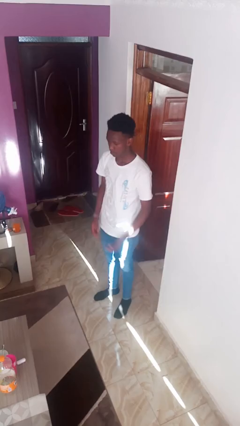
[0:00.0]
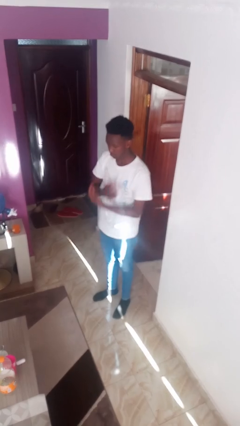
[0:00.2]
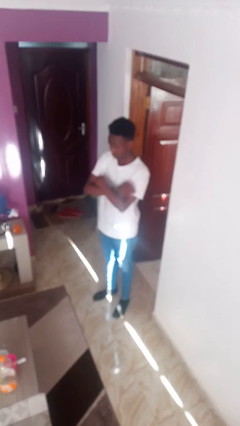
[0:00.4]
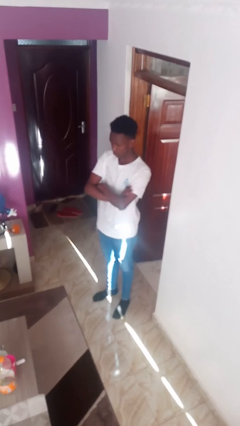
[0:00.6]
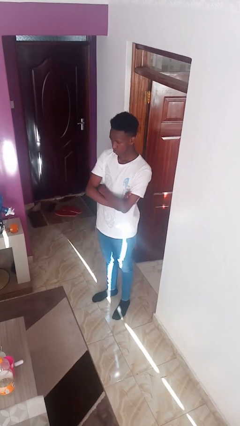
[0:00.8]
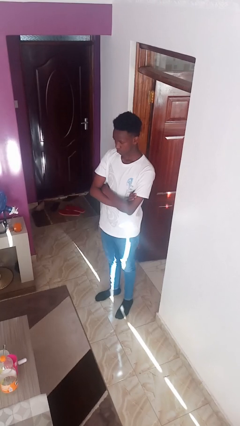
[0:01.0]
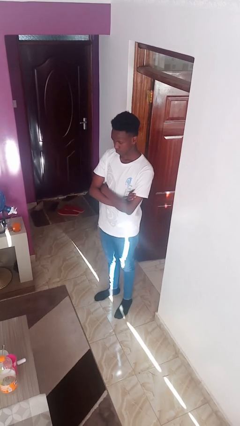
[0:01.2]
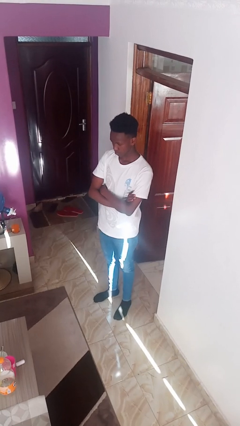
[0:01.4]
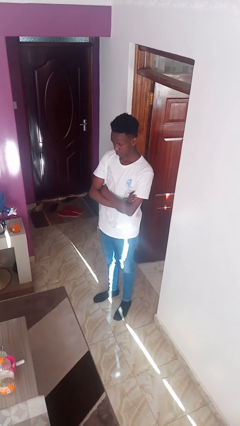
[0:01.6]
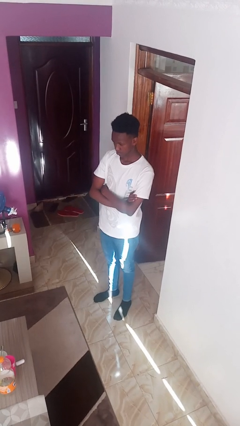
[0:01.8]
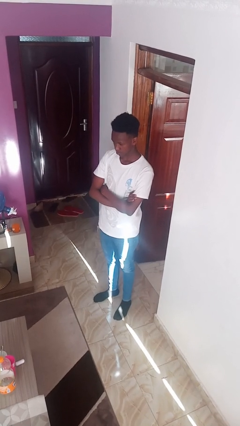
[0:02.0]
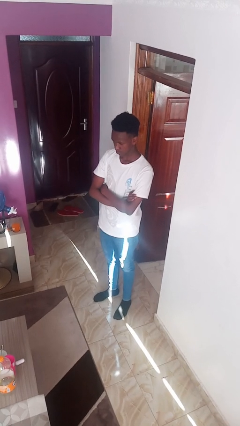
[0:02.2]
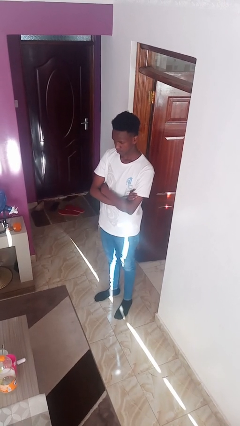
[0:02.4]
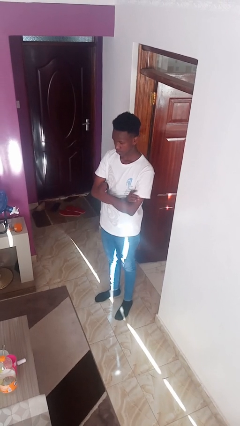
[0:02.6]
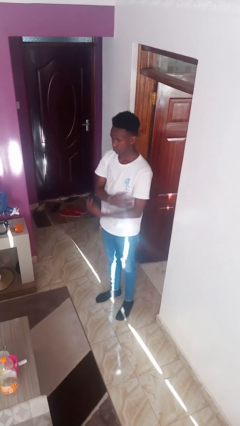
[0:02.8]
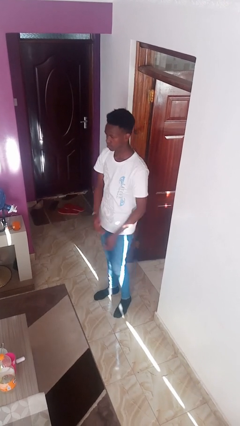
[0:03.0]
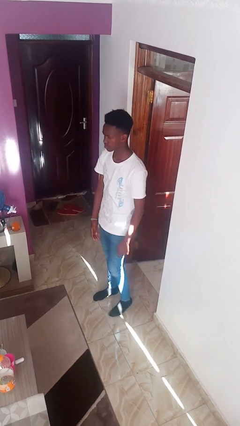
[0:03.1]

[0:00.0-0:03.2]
person crosses arms

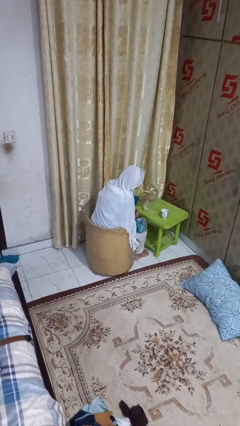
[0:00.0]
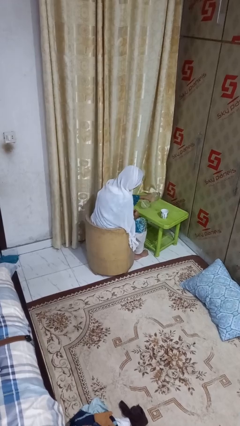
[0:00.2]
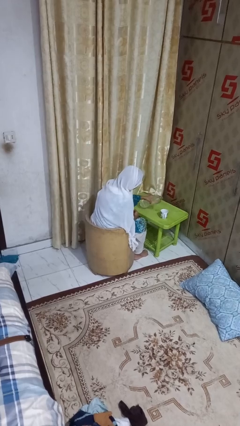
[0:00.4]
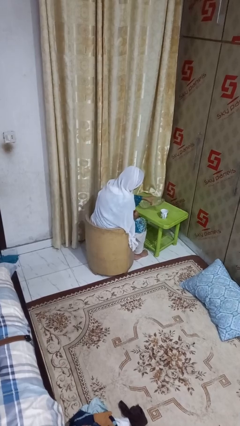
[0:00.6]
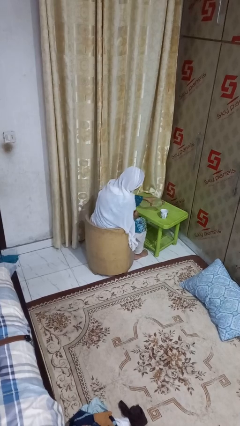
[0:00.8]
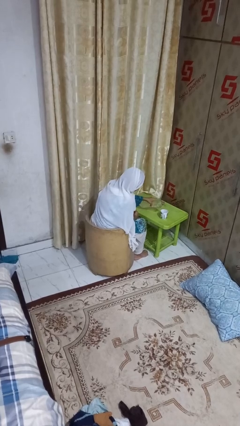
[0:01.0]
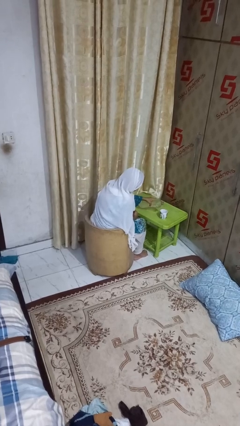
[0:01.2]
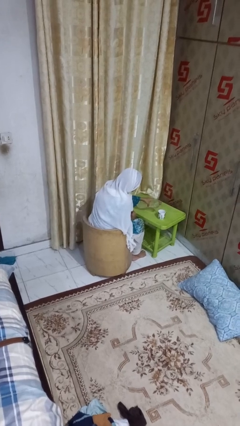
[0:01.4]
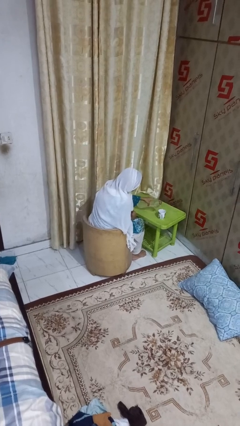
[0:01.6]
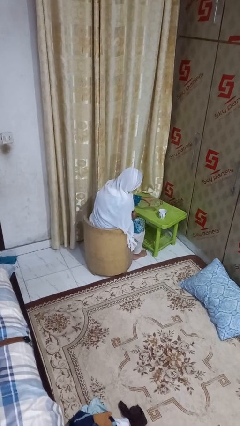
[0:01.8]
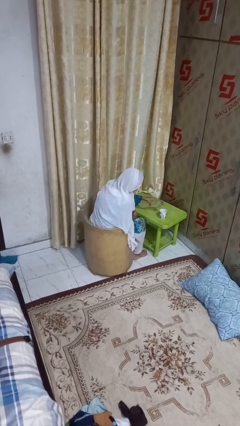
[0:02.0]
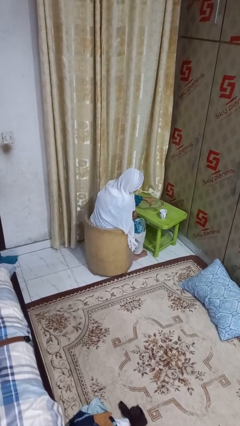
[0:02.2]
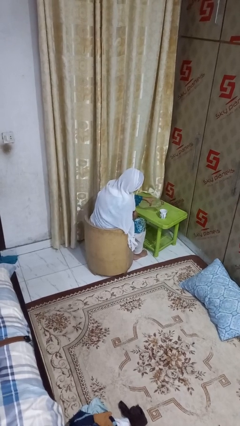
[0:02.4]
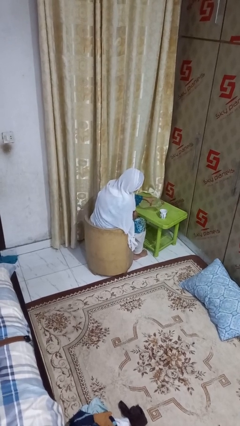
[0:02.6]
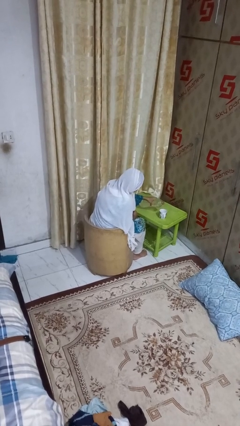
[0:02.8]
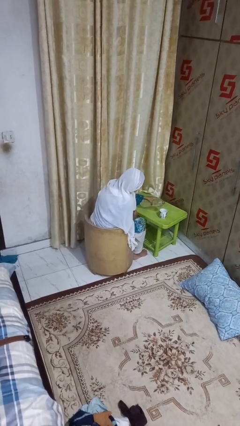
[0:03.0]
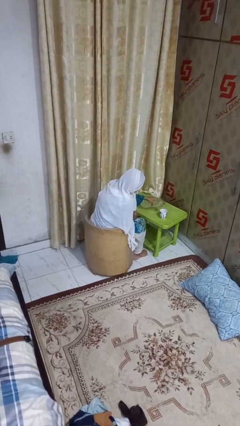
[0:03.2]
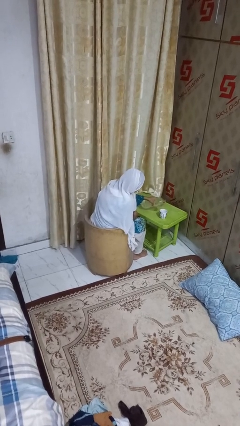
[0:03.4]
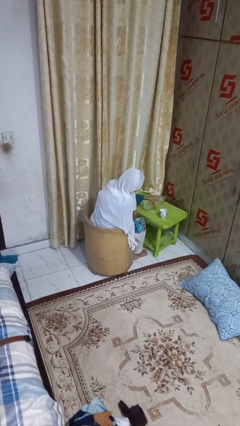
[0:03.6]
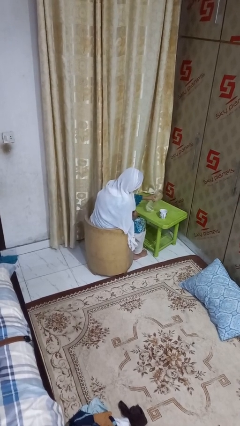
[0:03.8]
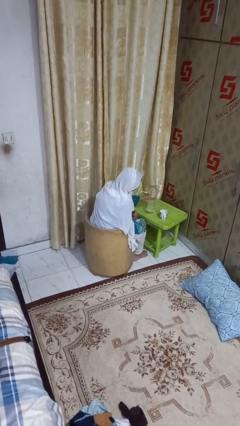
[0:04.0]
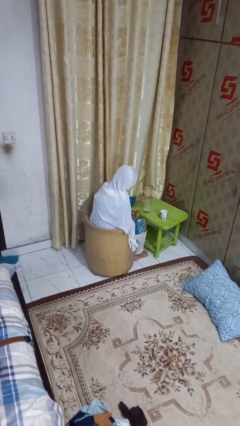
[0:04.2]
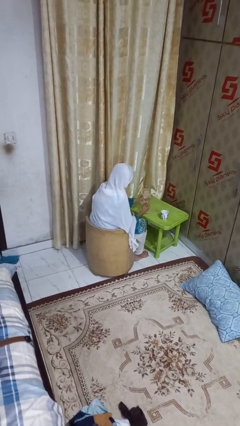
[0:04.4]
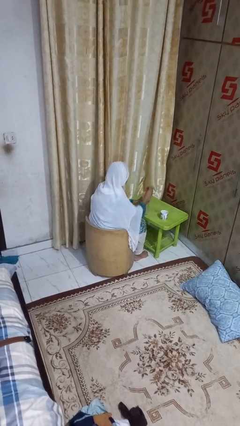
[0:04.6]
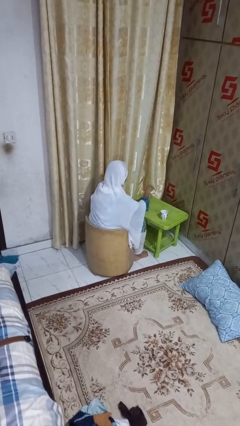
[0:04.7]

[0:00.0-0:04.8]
person pours liquid into cup

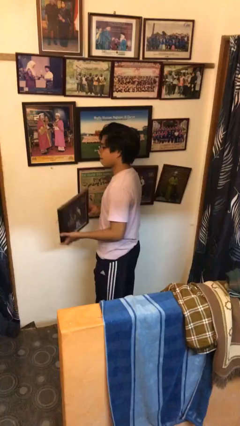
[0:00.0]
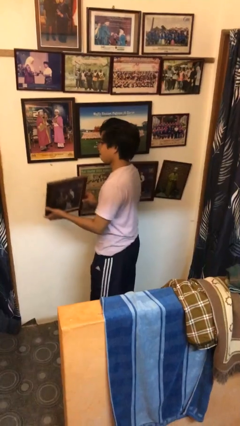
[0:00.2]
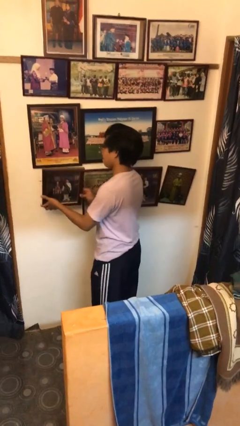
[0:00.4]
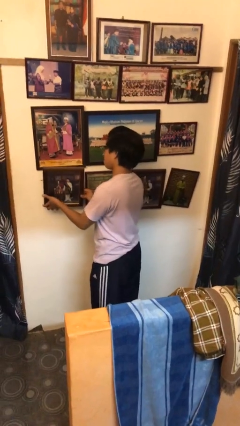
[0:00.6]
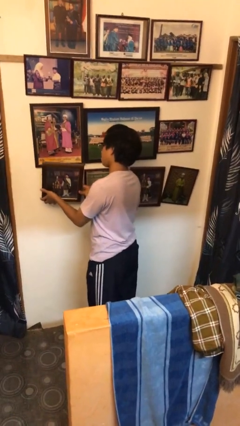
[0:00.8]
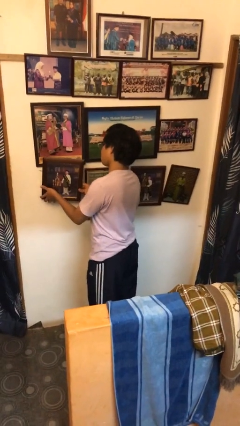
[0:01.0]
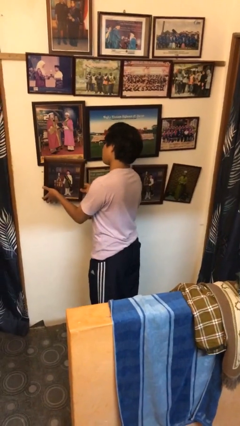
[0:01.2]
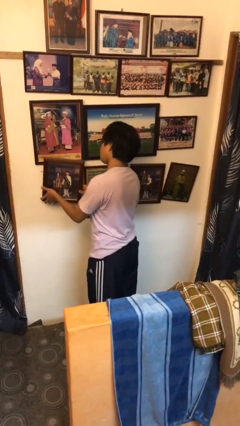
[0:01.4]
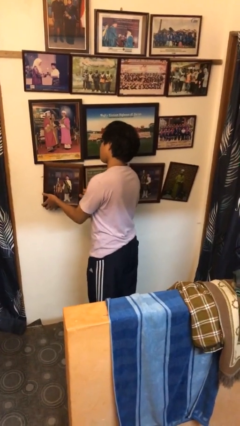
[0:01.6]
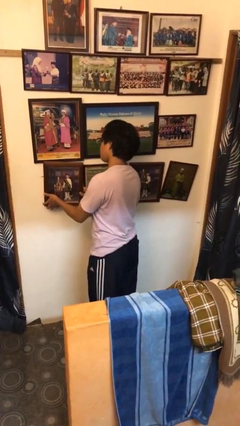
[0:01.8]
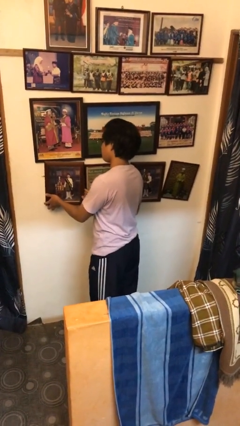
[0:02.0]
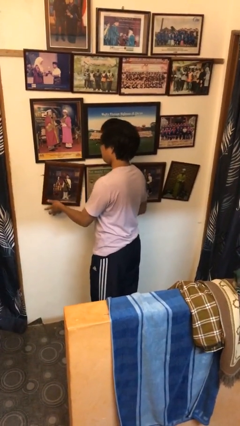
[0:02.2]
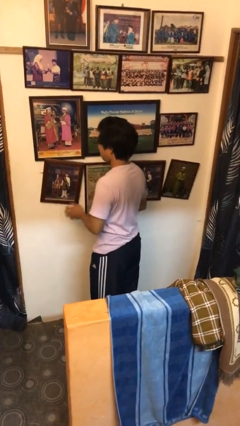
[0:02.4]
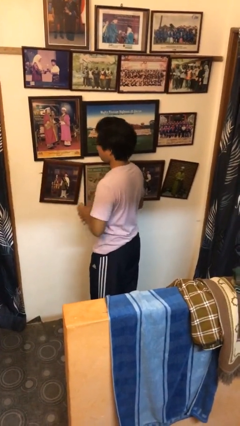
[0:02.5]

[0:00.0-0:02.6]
person puts up picture frame

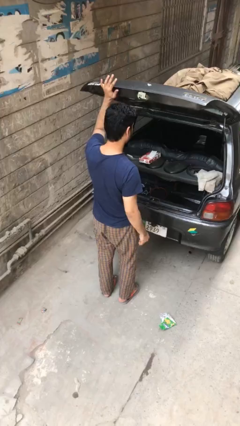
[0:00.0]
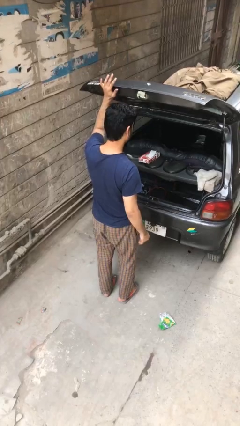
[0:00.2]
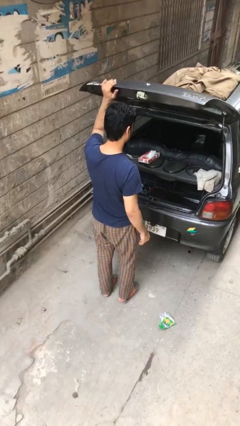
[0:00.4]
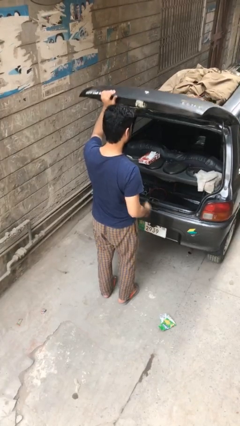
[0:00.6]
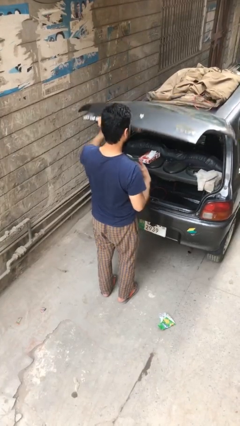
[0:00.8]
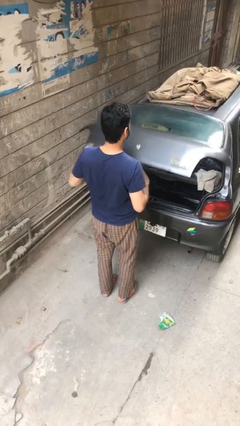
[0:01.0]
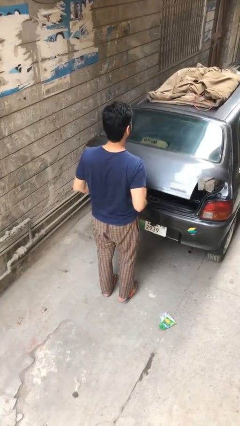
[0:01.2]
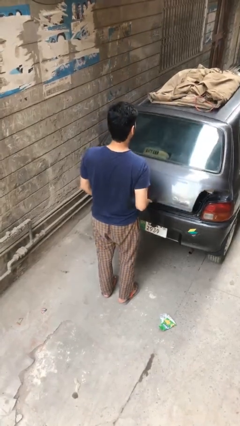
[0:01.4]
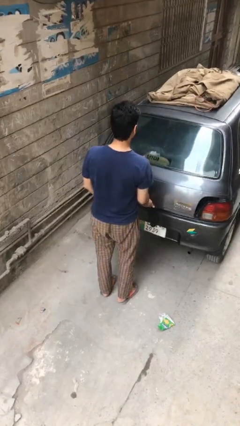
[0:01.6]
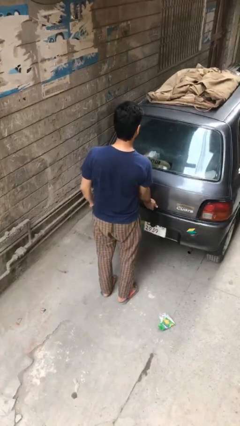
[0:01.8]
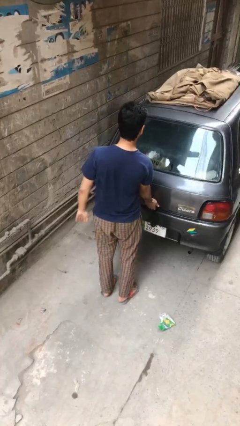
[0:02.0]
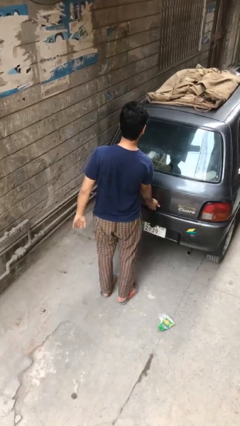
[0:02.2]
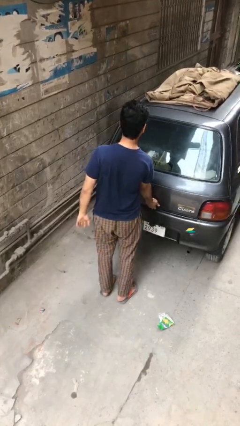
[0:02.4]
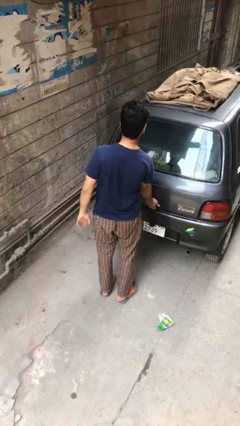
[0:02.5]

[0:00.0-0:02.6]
person closes car trunk

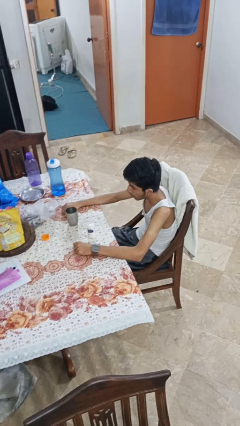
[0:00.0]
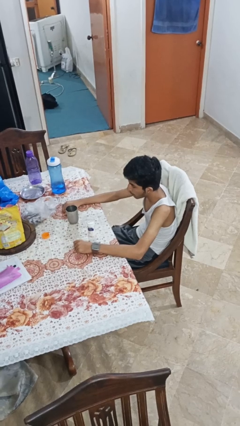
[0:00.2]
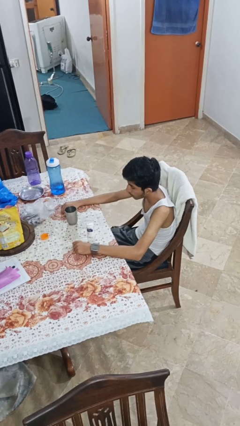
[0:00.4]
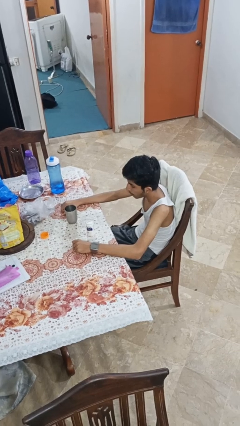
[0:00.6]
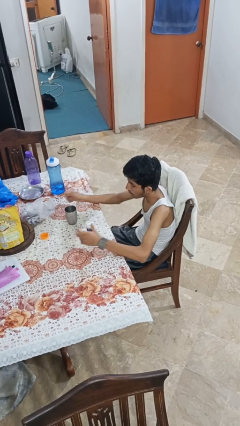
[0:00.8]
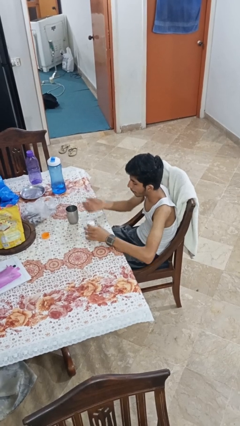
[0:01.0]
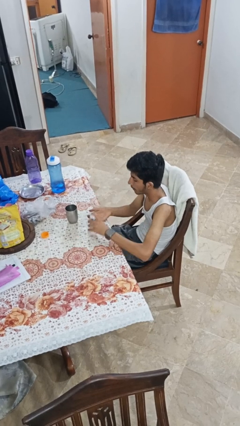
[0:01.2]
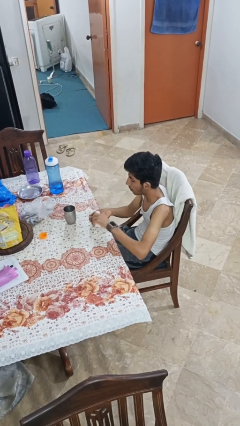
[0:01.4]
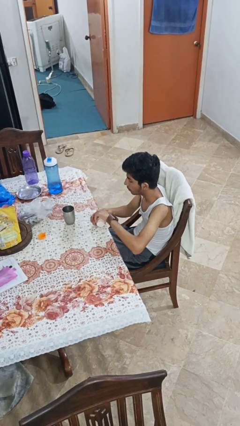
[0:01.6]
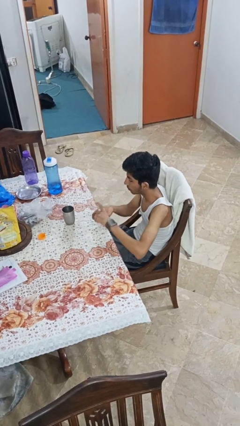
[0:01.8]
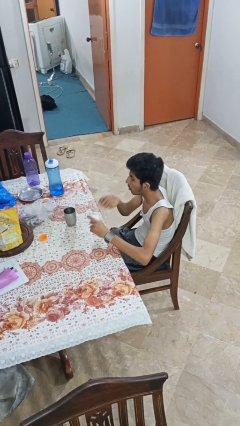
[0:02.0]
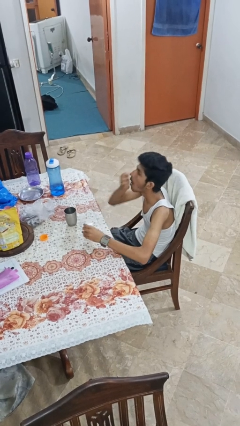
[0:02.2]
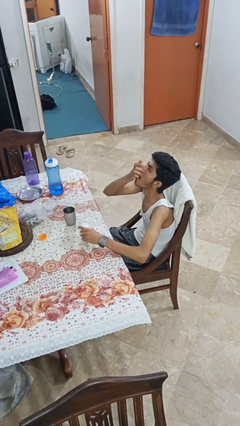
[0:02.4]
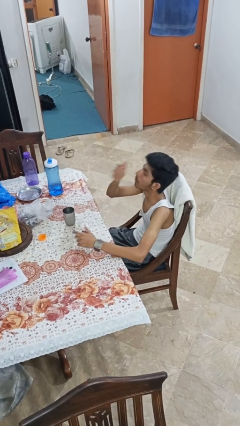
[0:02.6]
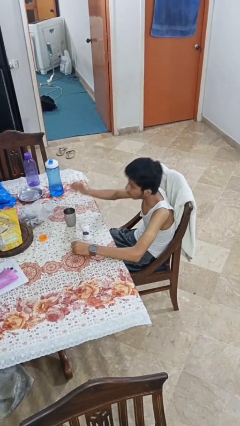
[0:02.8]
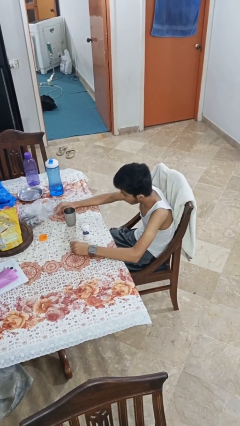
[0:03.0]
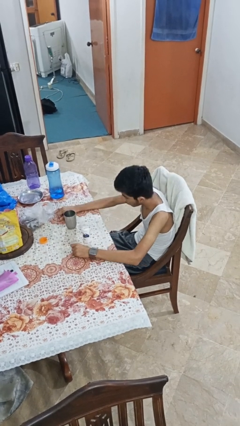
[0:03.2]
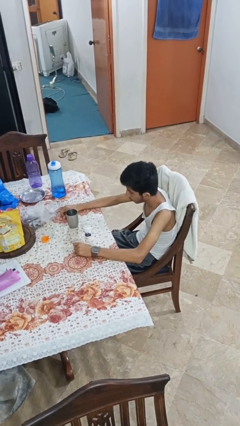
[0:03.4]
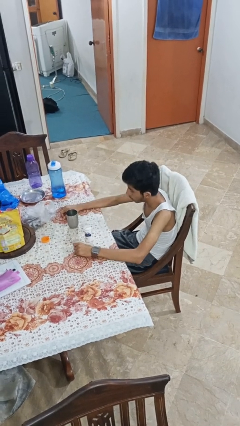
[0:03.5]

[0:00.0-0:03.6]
person takes medicine pills

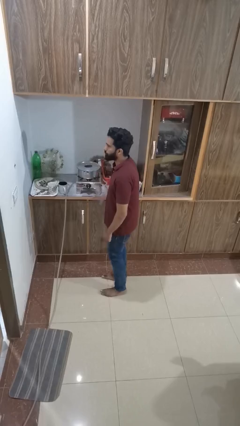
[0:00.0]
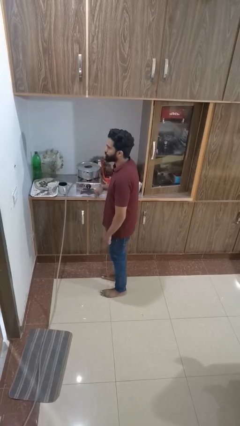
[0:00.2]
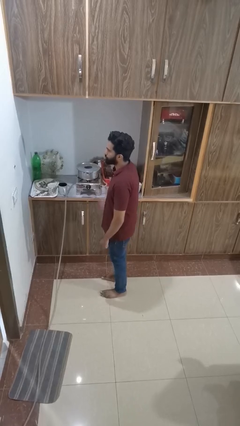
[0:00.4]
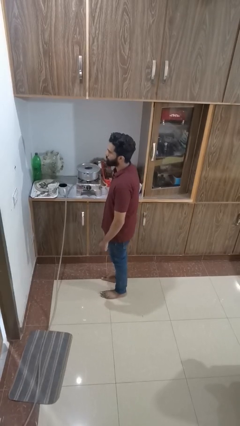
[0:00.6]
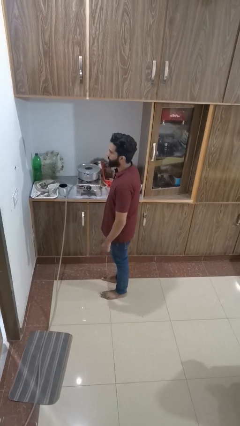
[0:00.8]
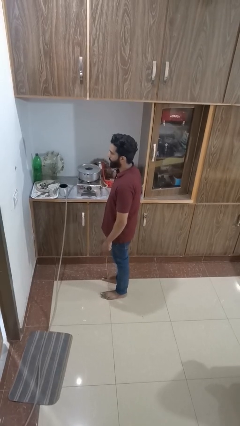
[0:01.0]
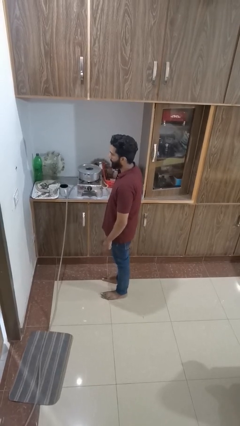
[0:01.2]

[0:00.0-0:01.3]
person burns hand
